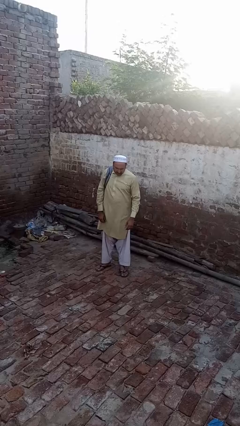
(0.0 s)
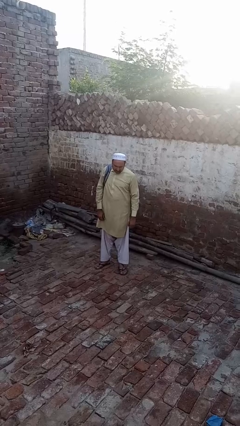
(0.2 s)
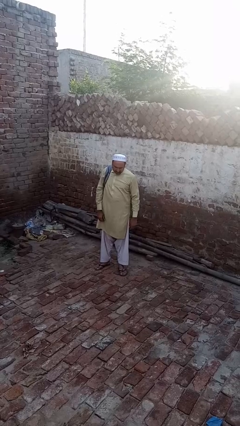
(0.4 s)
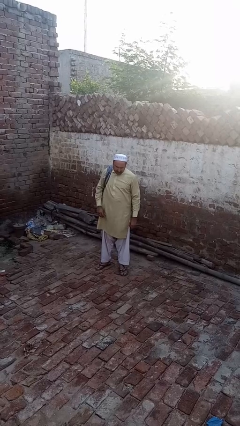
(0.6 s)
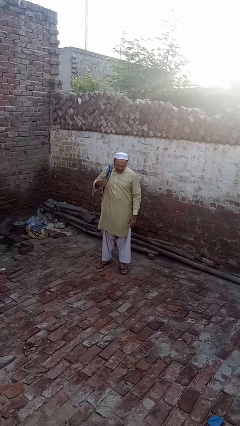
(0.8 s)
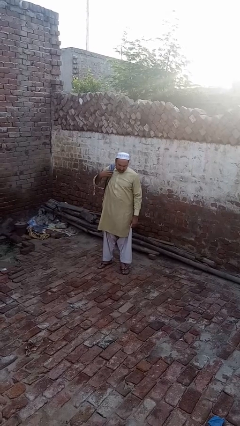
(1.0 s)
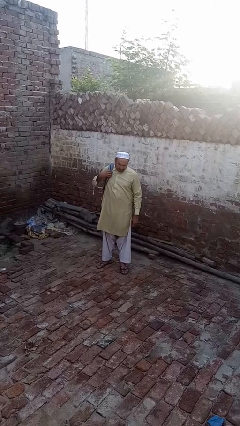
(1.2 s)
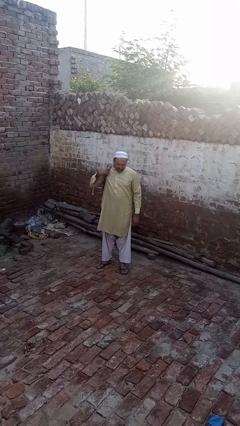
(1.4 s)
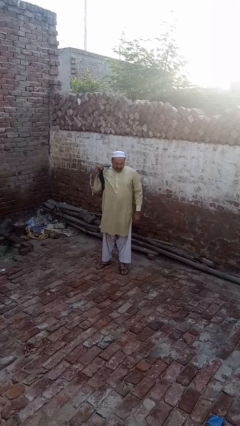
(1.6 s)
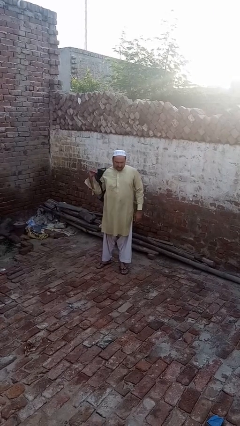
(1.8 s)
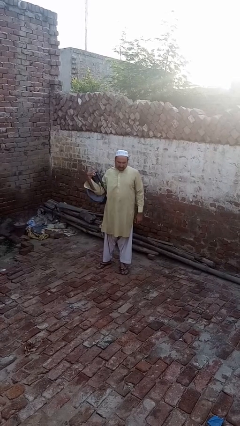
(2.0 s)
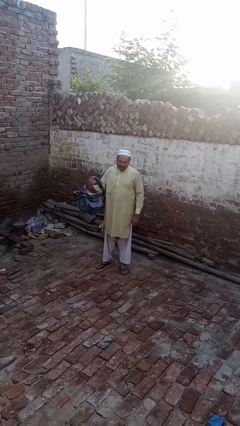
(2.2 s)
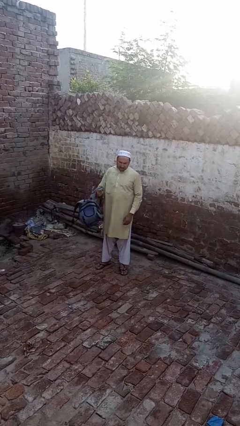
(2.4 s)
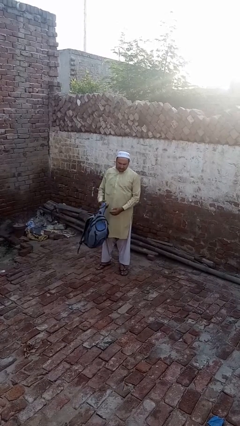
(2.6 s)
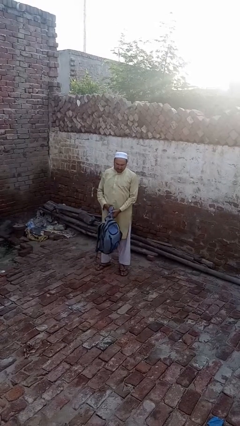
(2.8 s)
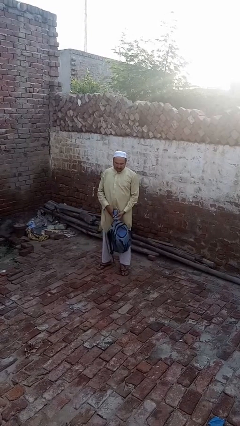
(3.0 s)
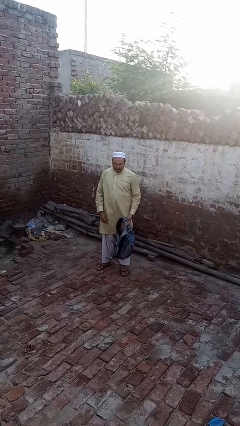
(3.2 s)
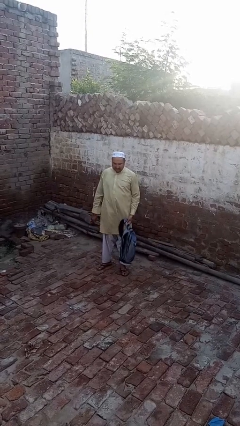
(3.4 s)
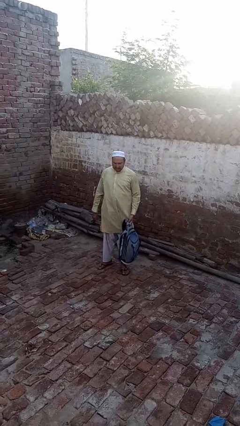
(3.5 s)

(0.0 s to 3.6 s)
person takes off backpack

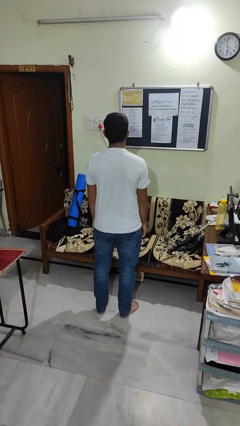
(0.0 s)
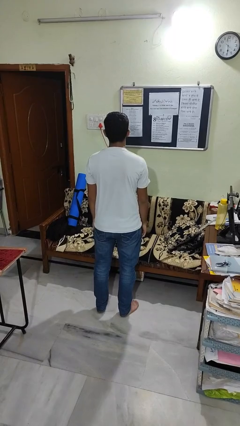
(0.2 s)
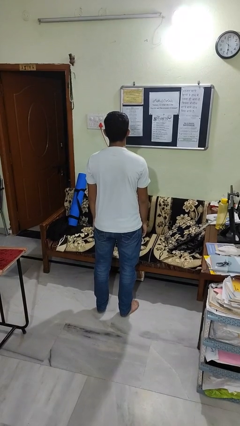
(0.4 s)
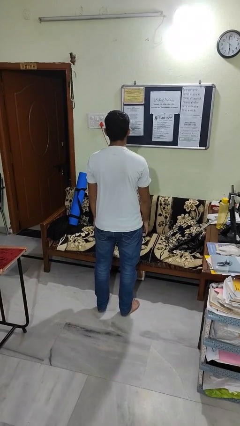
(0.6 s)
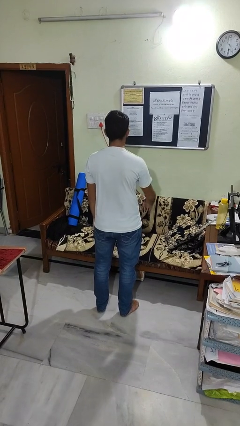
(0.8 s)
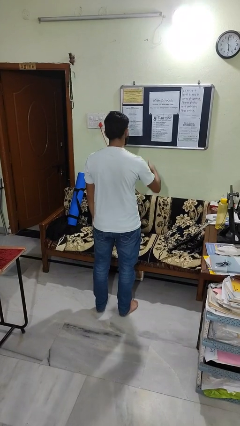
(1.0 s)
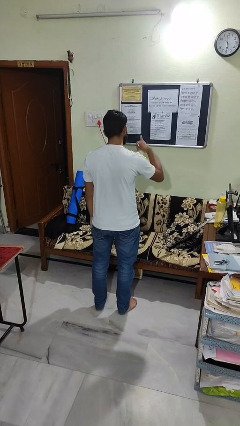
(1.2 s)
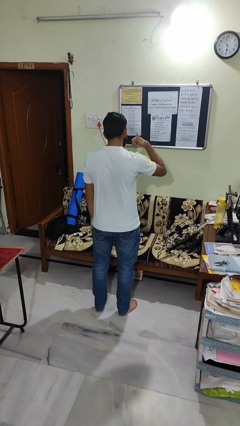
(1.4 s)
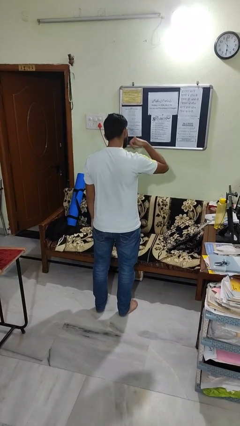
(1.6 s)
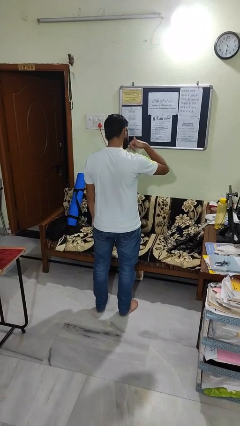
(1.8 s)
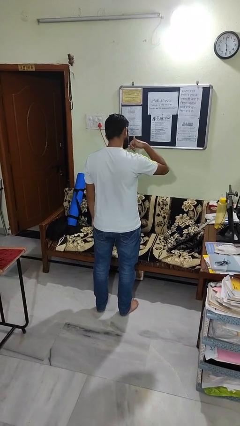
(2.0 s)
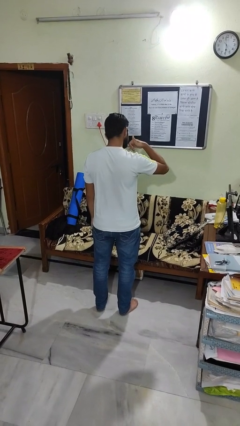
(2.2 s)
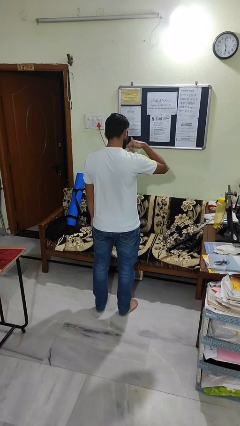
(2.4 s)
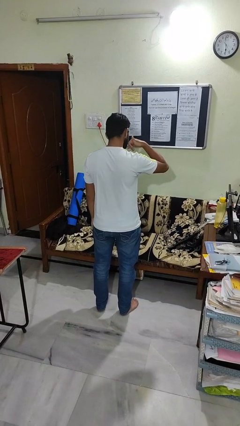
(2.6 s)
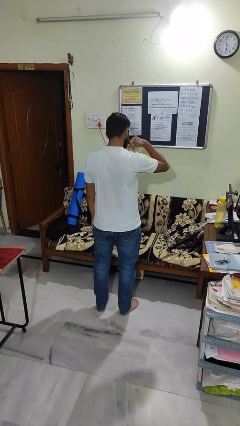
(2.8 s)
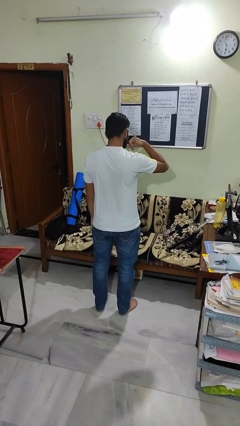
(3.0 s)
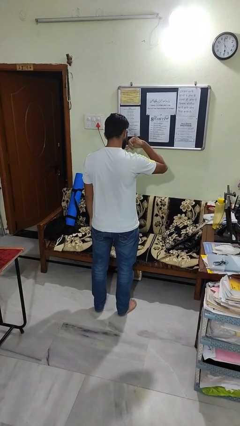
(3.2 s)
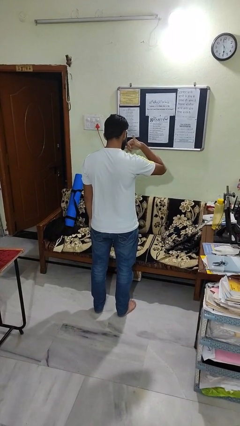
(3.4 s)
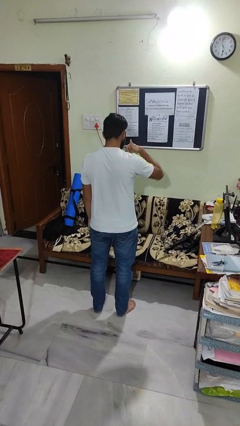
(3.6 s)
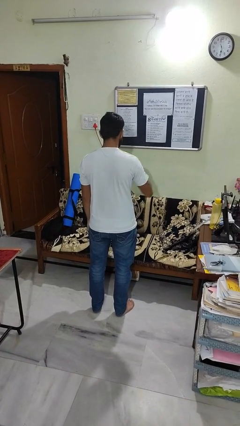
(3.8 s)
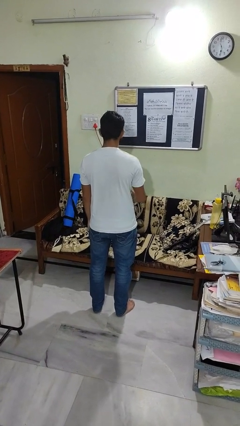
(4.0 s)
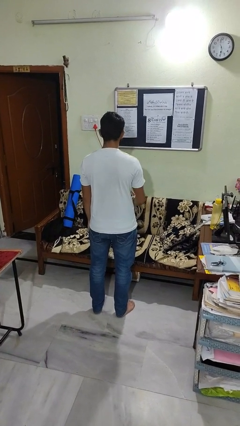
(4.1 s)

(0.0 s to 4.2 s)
person gestures call me

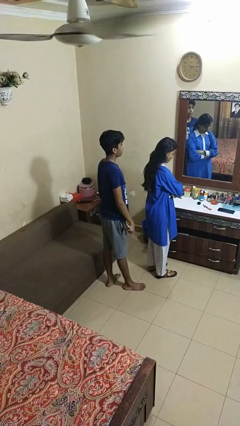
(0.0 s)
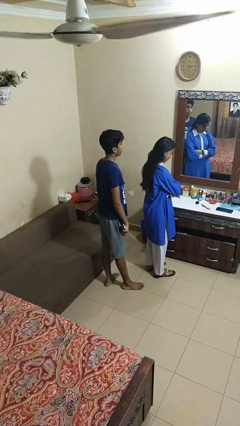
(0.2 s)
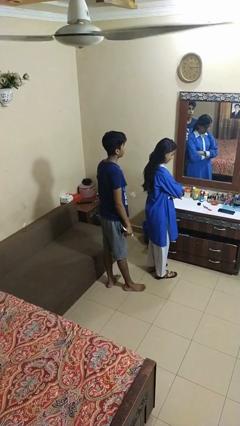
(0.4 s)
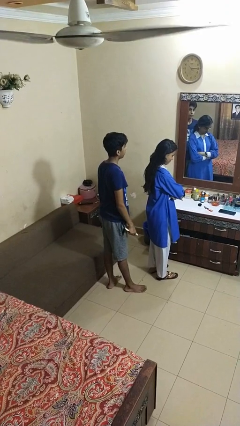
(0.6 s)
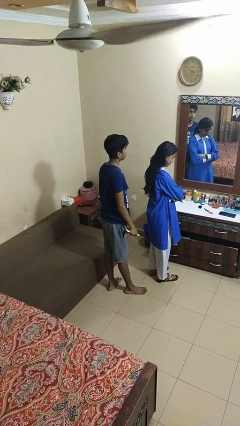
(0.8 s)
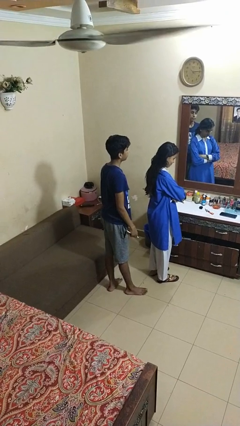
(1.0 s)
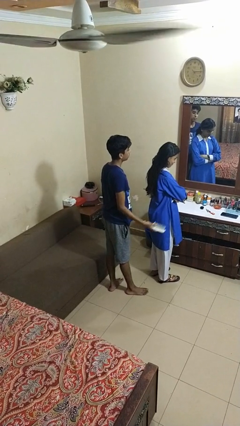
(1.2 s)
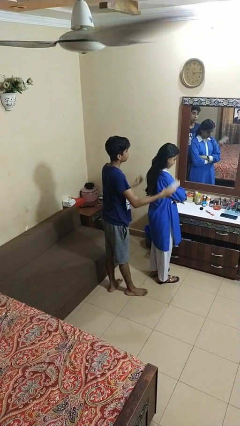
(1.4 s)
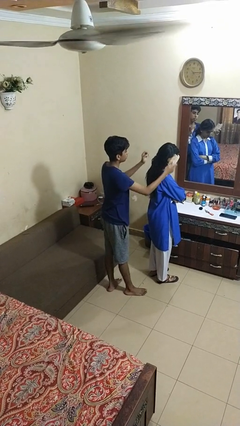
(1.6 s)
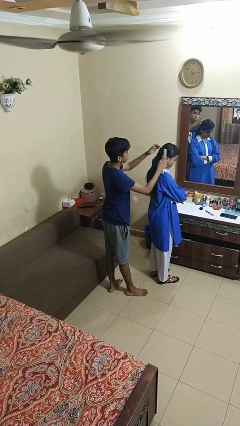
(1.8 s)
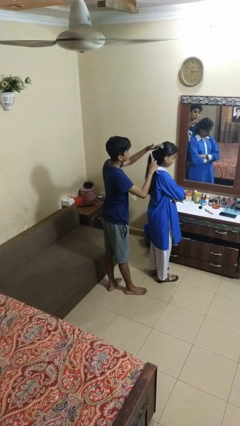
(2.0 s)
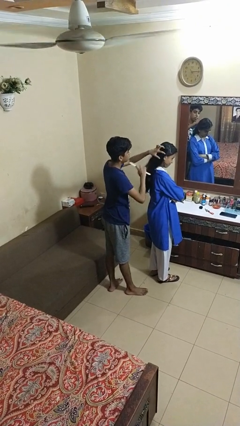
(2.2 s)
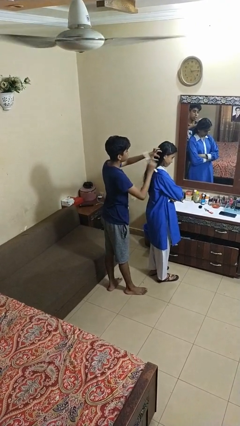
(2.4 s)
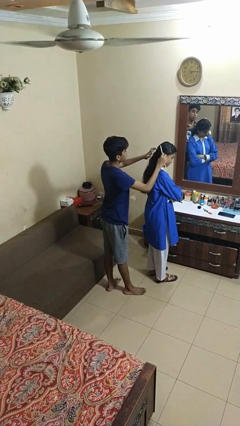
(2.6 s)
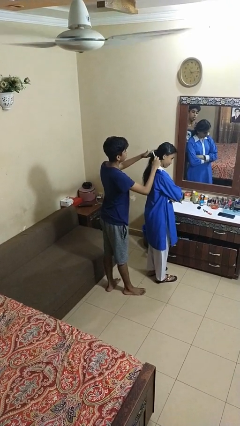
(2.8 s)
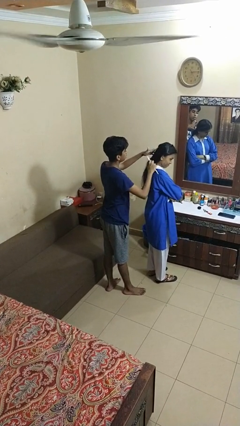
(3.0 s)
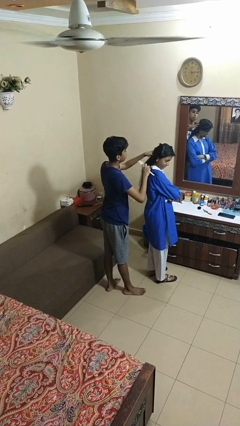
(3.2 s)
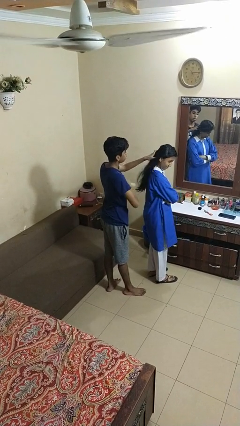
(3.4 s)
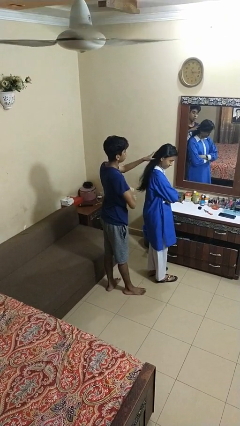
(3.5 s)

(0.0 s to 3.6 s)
person brushes hair of person

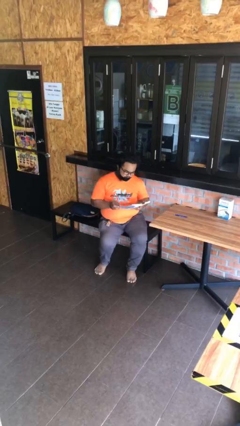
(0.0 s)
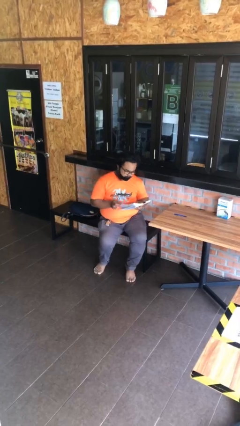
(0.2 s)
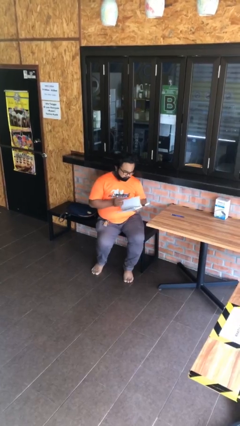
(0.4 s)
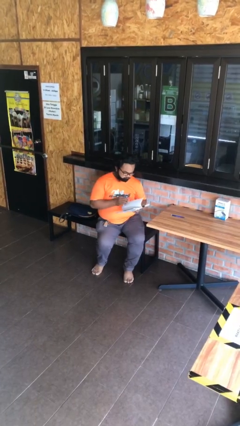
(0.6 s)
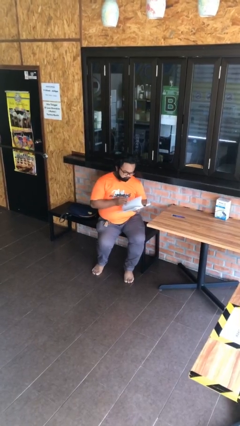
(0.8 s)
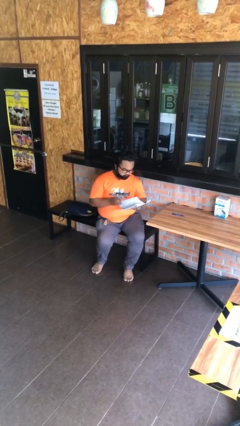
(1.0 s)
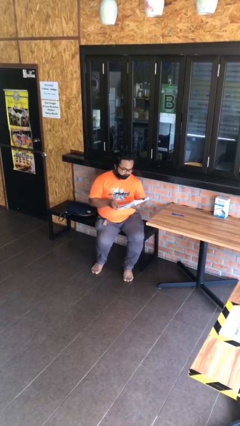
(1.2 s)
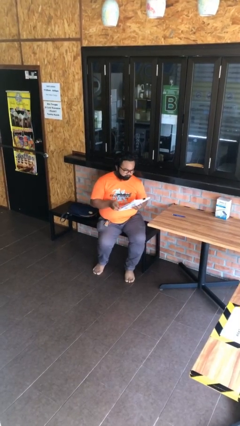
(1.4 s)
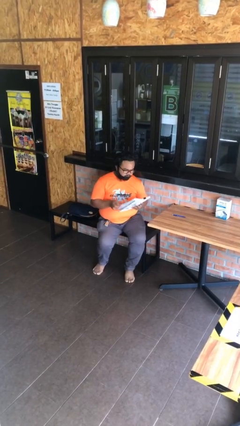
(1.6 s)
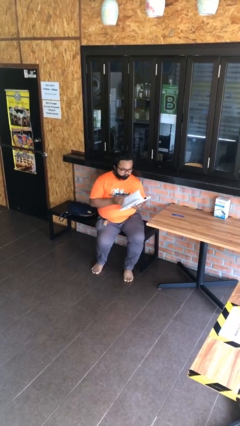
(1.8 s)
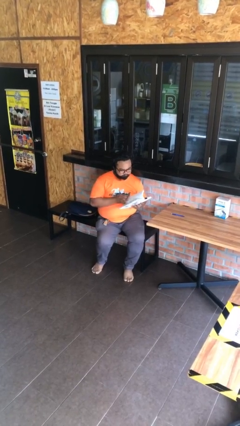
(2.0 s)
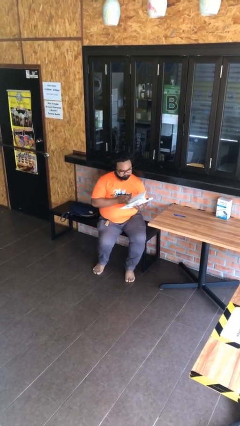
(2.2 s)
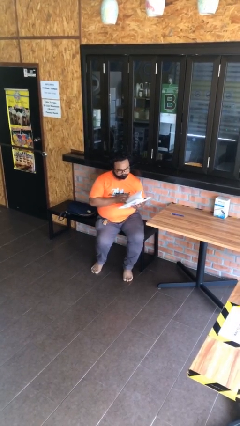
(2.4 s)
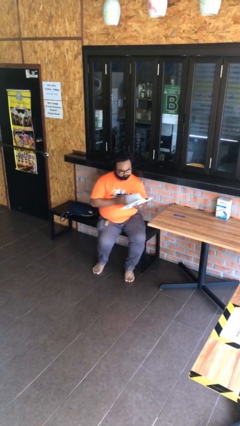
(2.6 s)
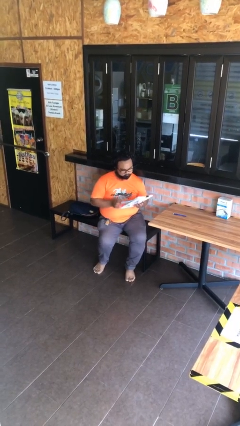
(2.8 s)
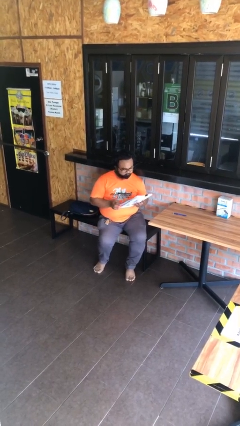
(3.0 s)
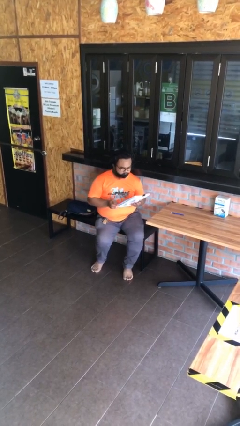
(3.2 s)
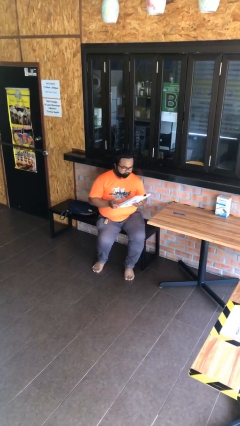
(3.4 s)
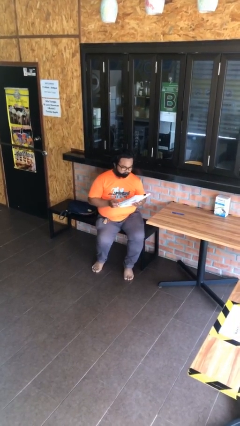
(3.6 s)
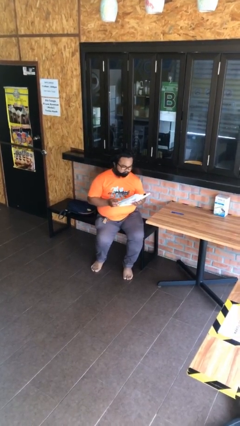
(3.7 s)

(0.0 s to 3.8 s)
person reads document

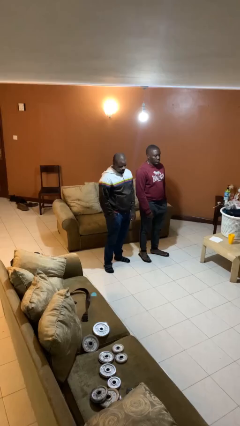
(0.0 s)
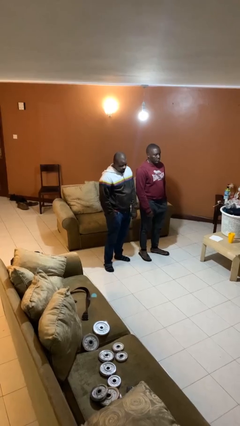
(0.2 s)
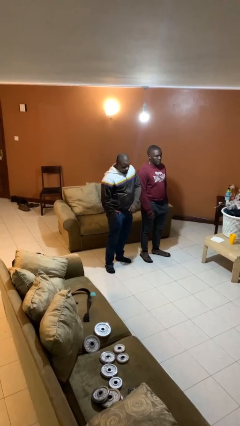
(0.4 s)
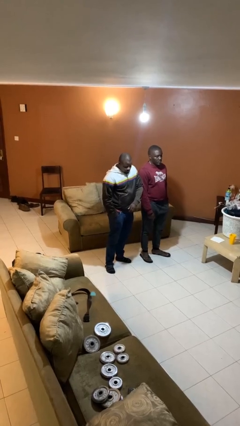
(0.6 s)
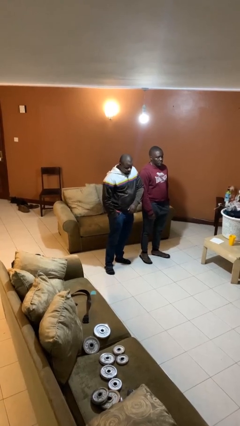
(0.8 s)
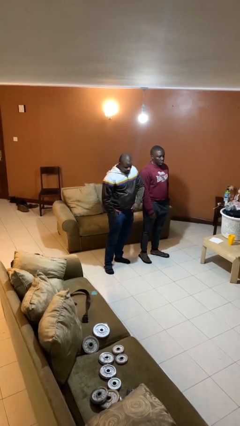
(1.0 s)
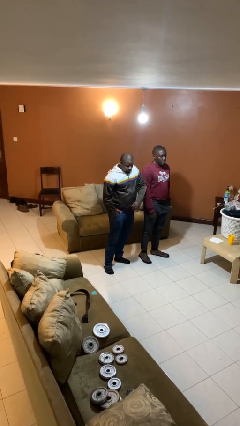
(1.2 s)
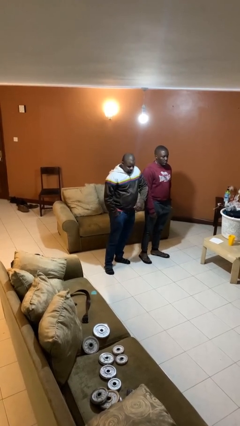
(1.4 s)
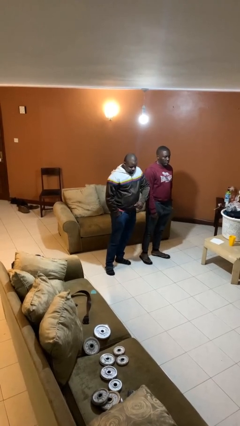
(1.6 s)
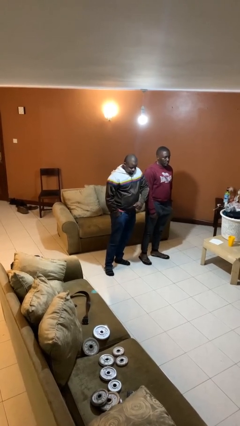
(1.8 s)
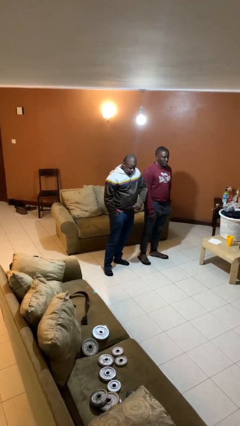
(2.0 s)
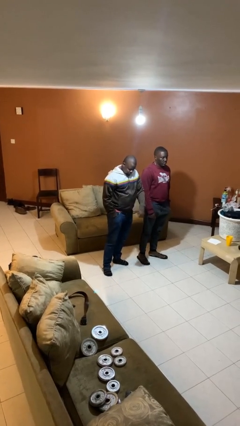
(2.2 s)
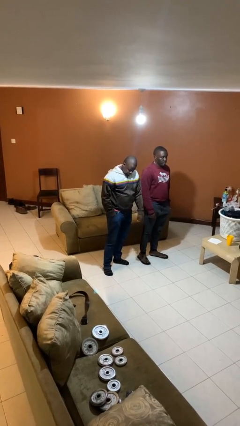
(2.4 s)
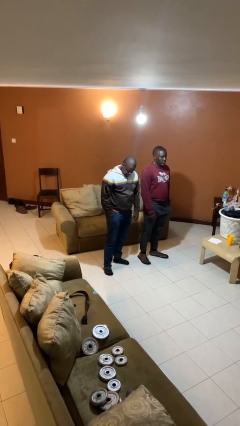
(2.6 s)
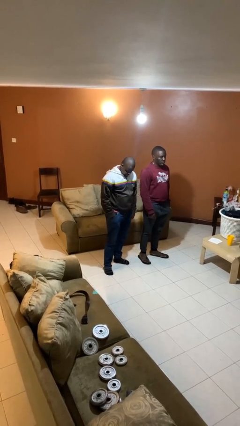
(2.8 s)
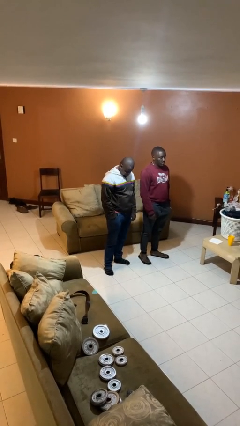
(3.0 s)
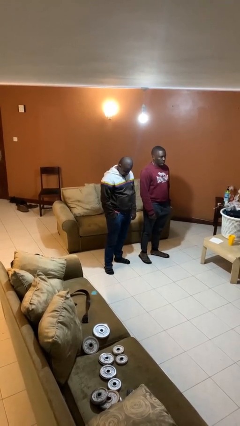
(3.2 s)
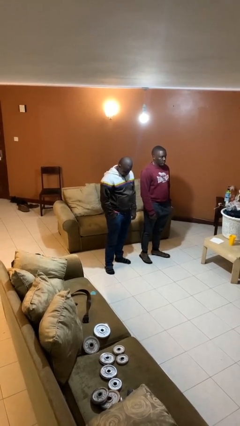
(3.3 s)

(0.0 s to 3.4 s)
person nudges person with elbow
